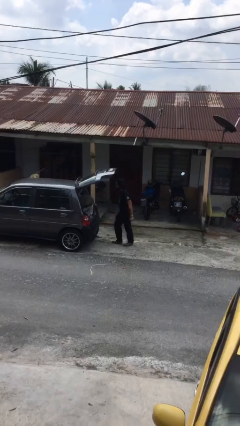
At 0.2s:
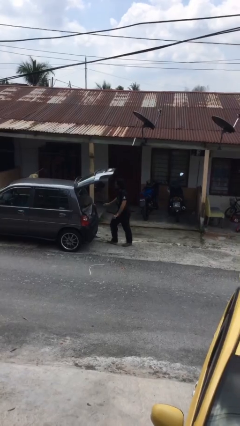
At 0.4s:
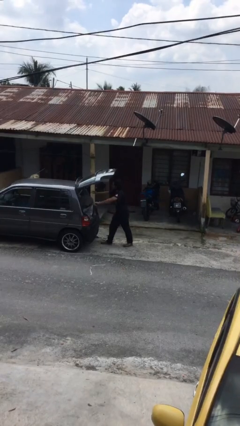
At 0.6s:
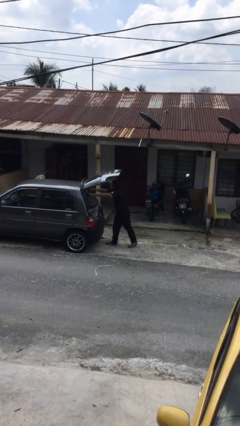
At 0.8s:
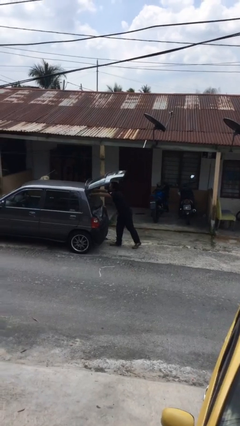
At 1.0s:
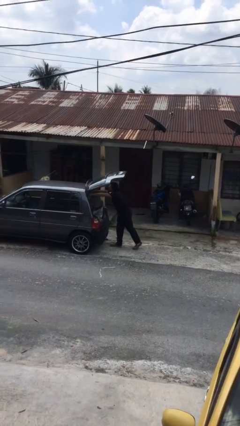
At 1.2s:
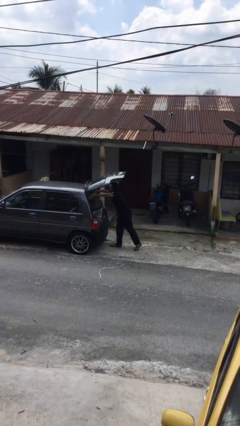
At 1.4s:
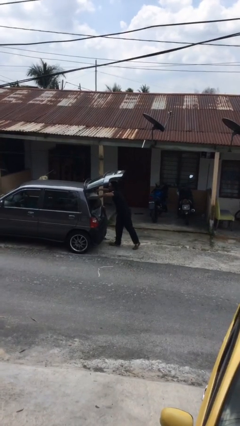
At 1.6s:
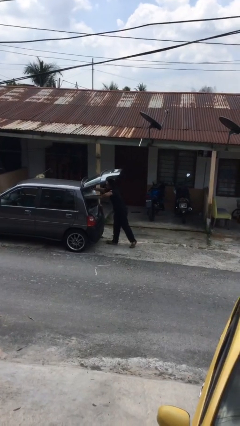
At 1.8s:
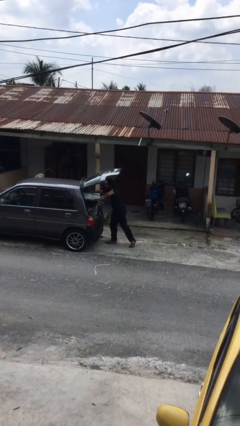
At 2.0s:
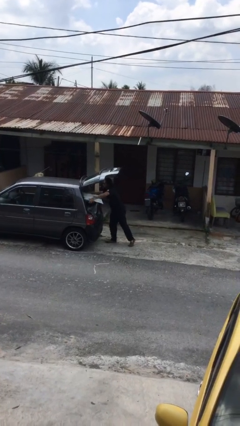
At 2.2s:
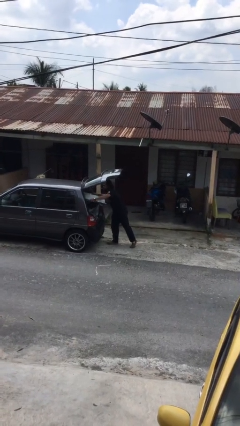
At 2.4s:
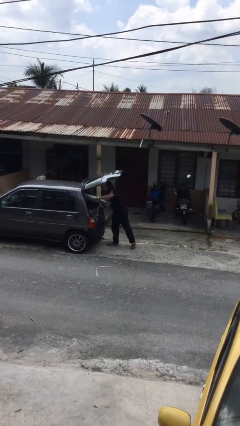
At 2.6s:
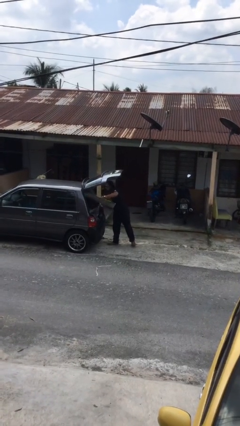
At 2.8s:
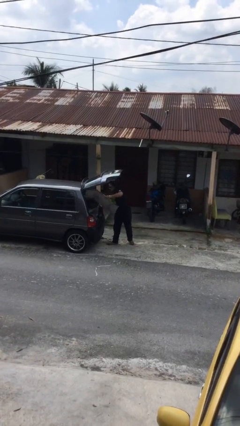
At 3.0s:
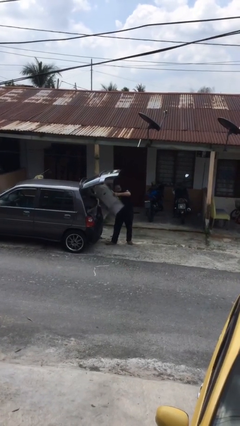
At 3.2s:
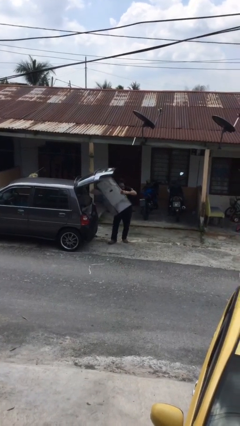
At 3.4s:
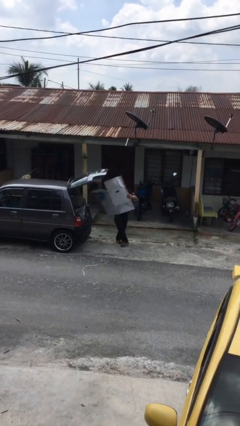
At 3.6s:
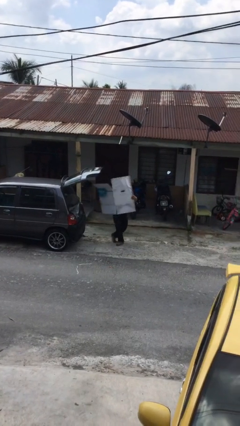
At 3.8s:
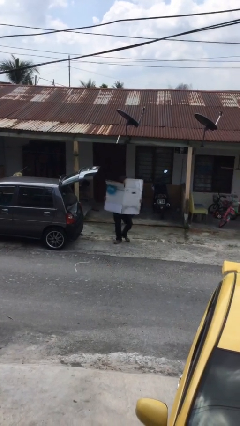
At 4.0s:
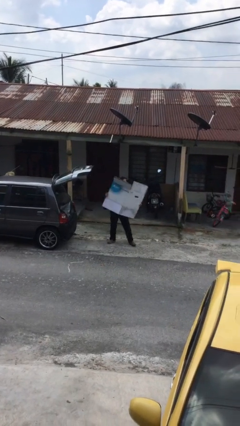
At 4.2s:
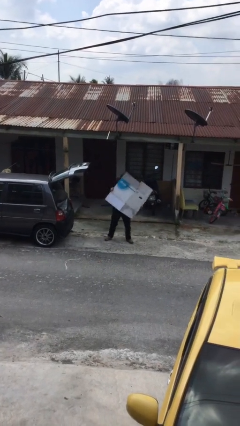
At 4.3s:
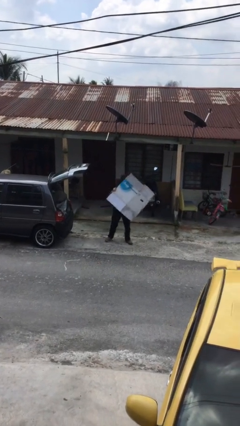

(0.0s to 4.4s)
person unloads car

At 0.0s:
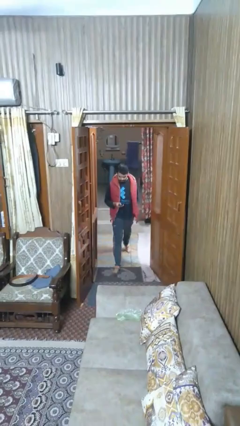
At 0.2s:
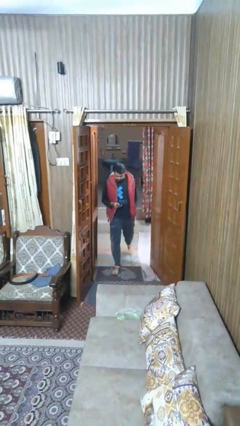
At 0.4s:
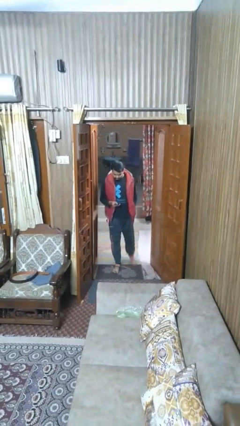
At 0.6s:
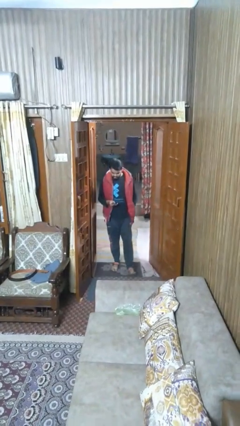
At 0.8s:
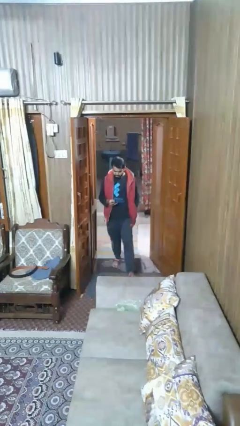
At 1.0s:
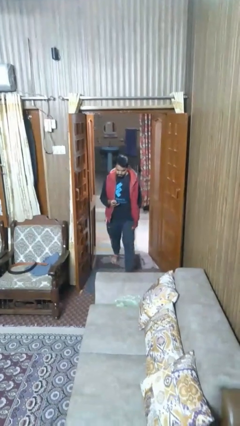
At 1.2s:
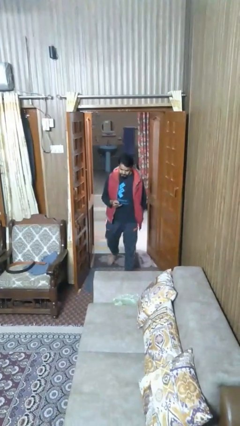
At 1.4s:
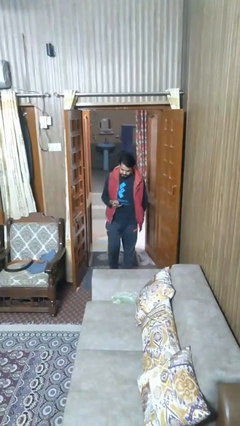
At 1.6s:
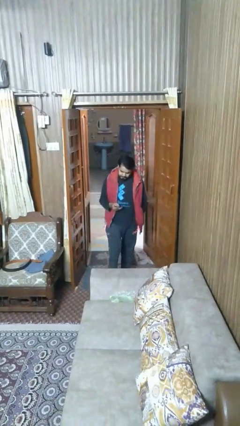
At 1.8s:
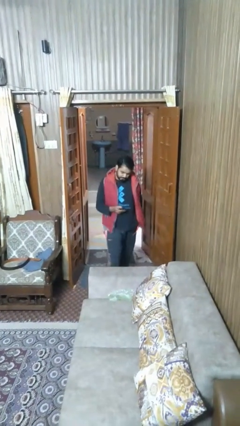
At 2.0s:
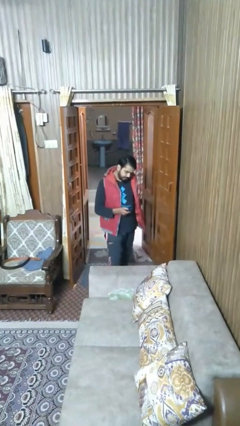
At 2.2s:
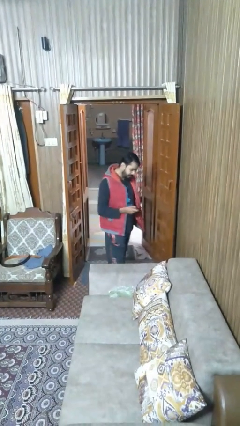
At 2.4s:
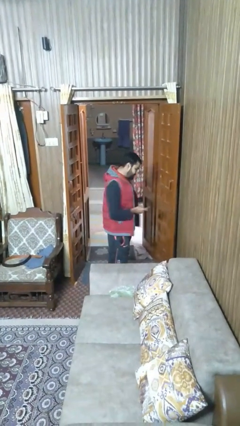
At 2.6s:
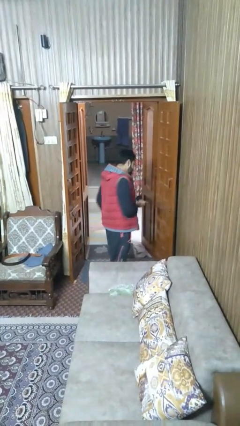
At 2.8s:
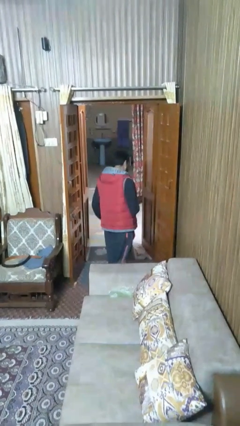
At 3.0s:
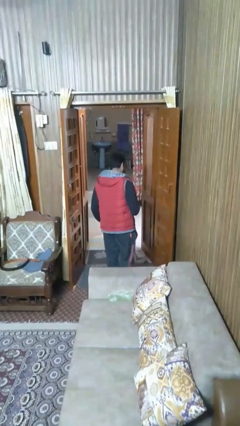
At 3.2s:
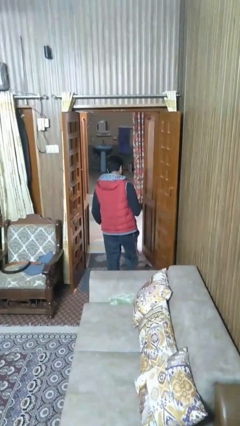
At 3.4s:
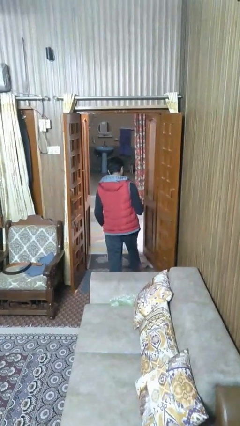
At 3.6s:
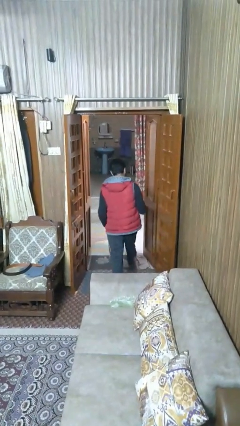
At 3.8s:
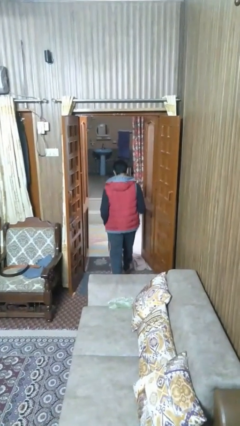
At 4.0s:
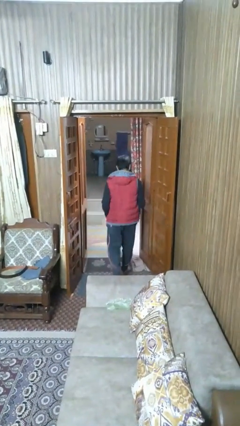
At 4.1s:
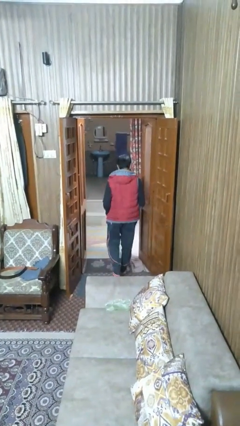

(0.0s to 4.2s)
person enters scene through structure

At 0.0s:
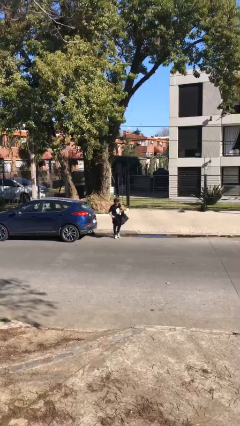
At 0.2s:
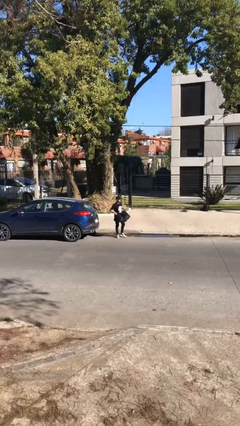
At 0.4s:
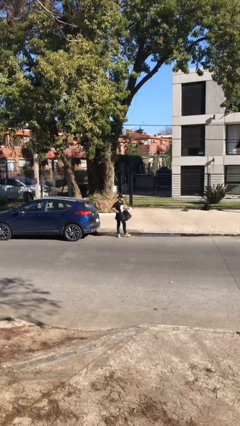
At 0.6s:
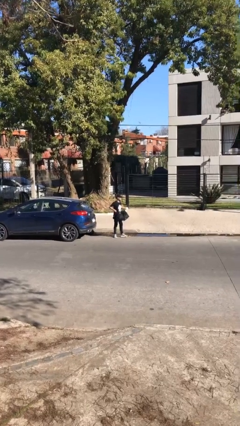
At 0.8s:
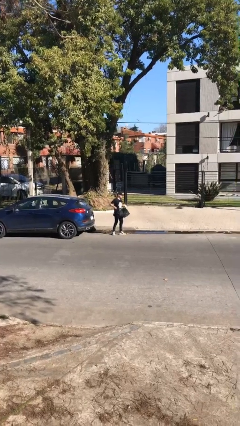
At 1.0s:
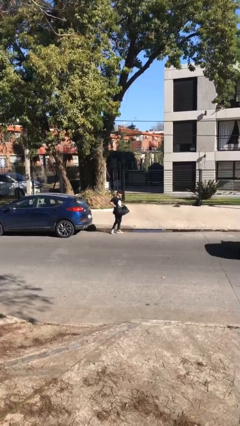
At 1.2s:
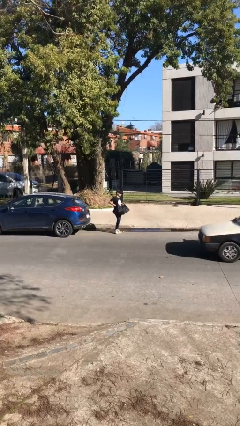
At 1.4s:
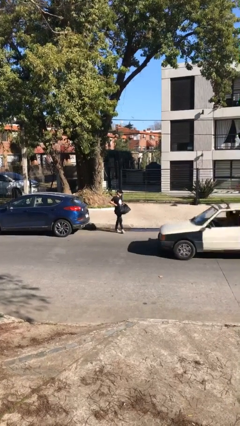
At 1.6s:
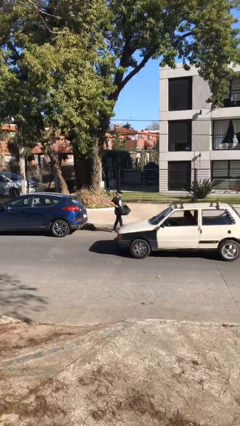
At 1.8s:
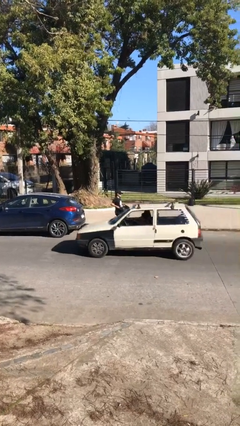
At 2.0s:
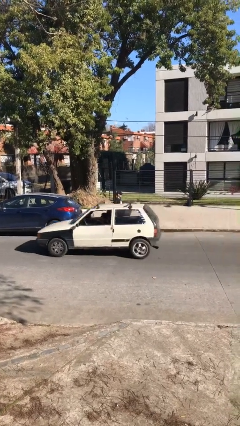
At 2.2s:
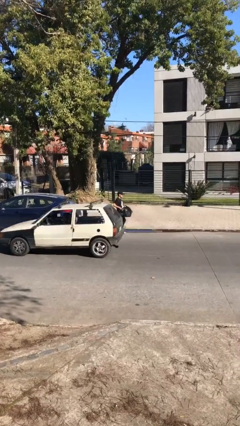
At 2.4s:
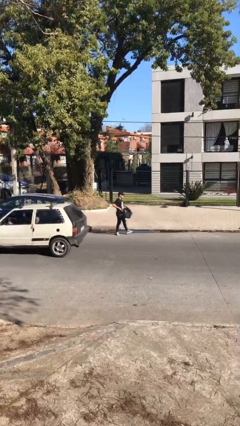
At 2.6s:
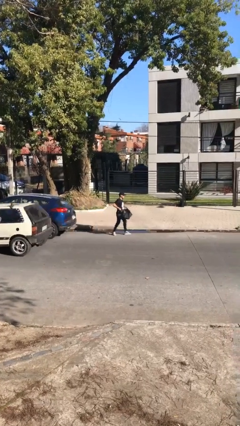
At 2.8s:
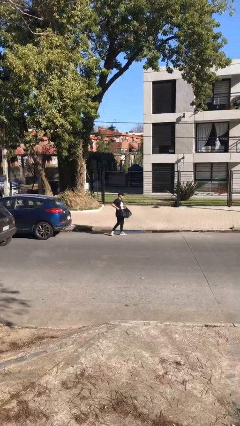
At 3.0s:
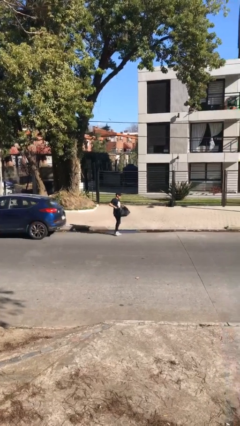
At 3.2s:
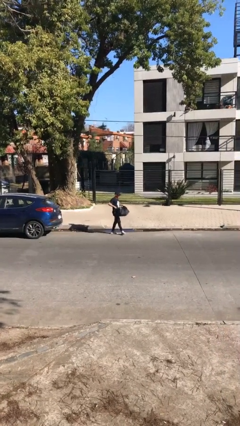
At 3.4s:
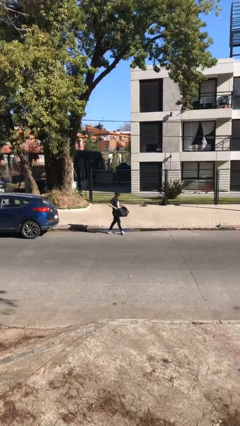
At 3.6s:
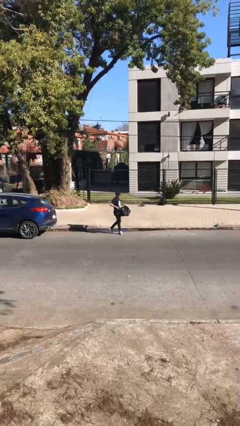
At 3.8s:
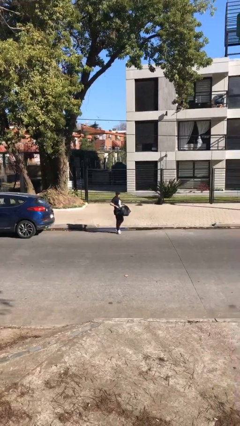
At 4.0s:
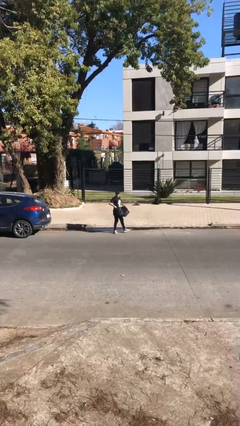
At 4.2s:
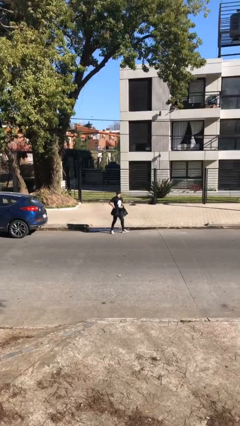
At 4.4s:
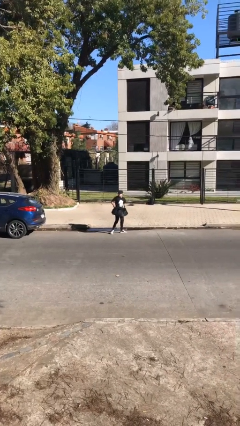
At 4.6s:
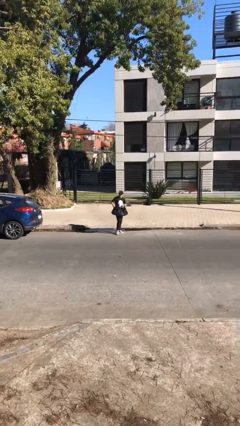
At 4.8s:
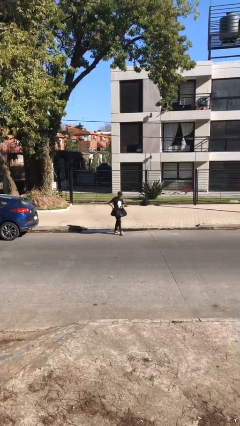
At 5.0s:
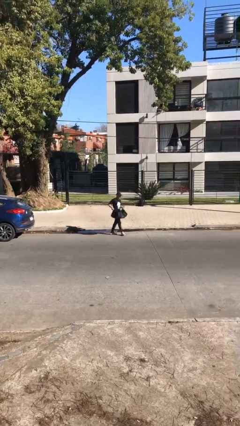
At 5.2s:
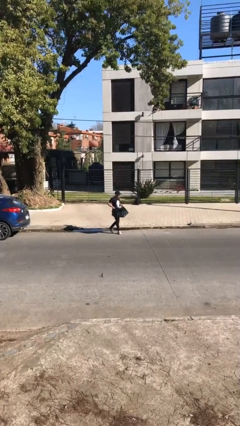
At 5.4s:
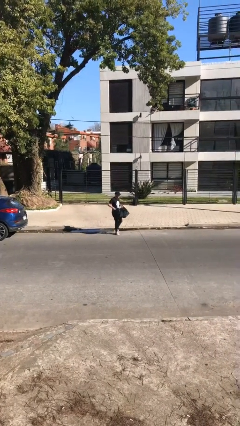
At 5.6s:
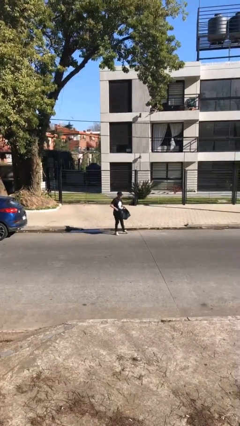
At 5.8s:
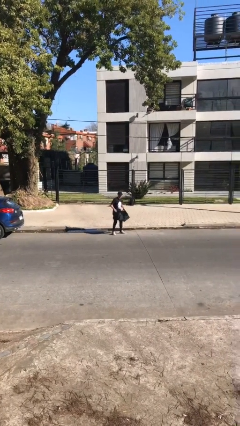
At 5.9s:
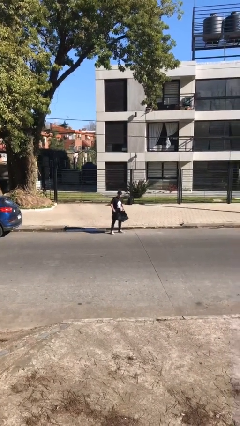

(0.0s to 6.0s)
person carries heavy object

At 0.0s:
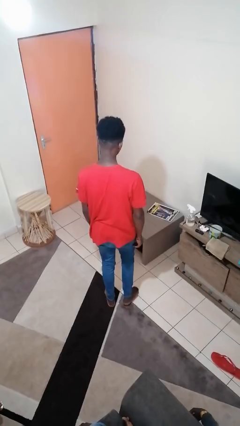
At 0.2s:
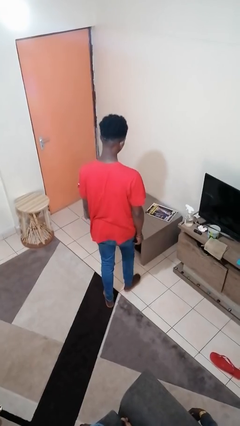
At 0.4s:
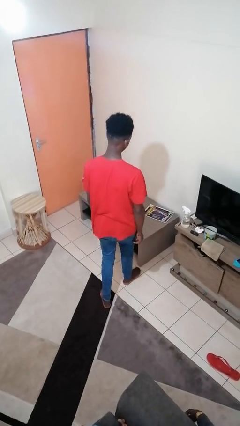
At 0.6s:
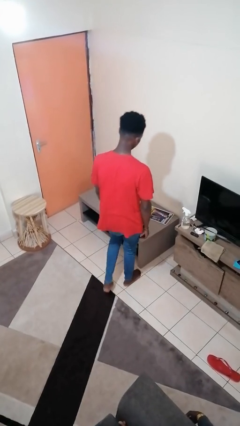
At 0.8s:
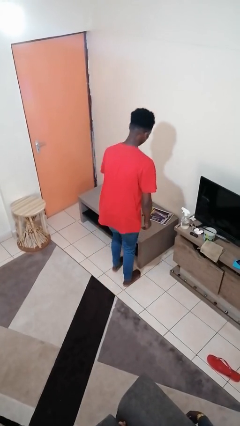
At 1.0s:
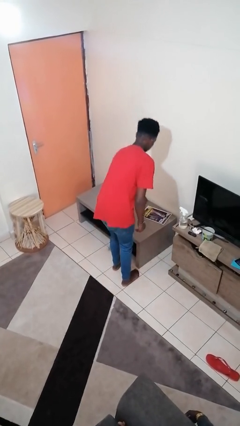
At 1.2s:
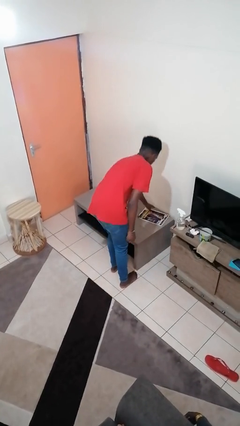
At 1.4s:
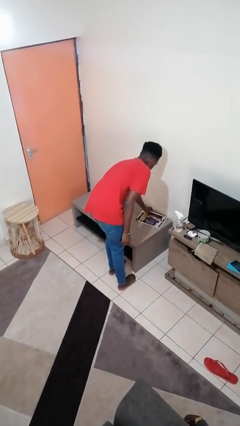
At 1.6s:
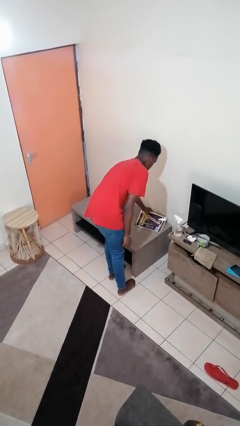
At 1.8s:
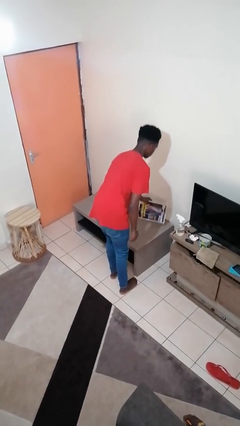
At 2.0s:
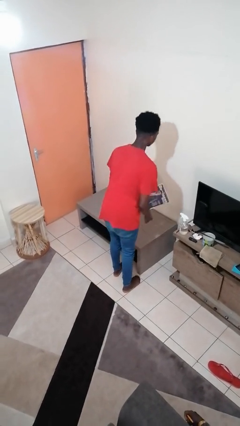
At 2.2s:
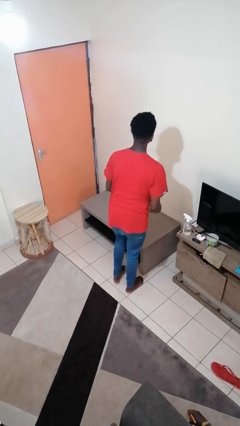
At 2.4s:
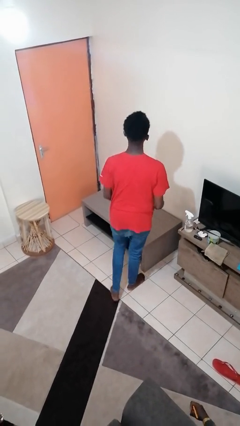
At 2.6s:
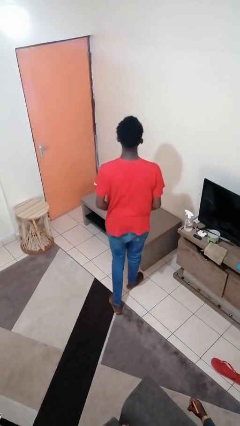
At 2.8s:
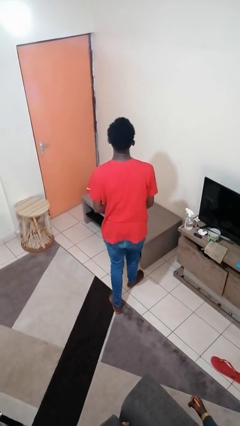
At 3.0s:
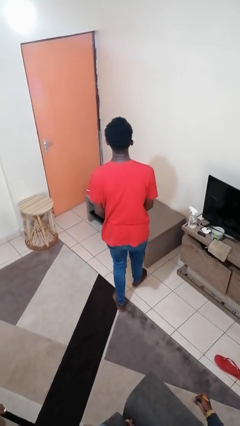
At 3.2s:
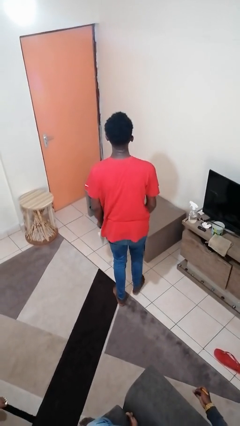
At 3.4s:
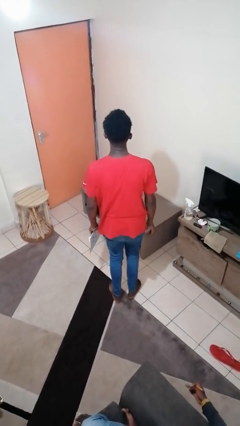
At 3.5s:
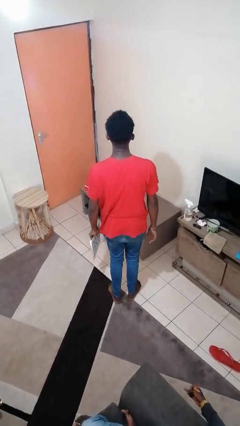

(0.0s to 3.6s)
person picks up object from table
